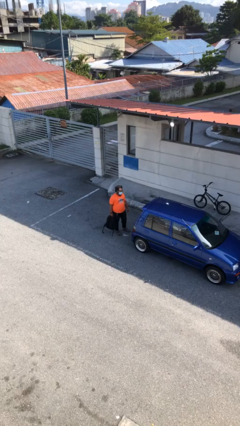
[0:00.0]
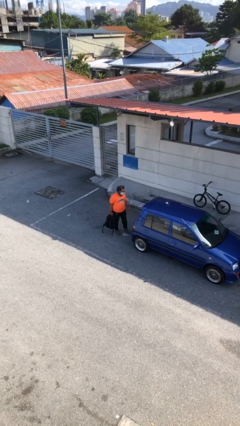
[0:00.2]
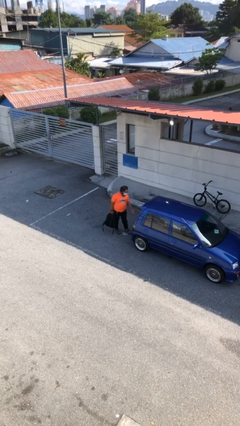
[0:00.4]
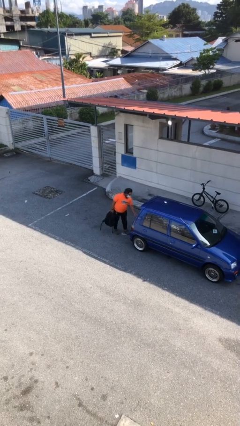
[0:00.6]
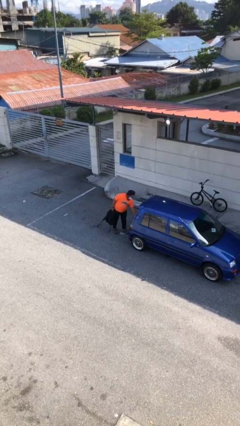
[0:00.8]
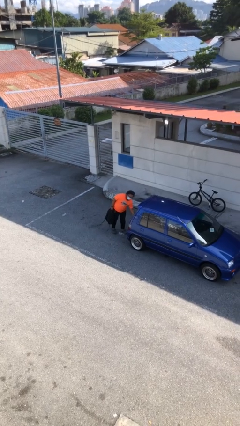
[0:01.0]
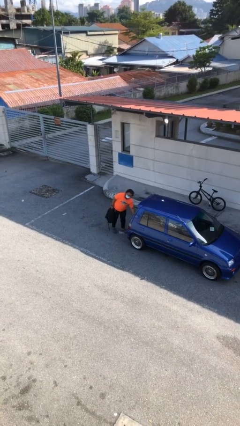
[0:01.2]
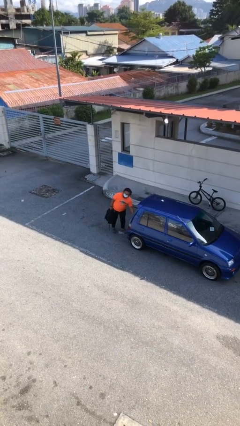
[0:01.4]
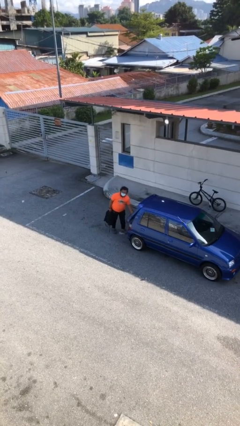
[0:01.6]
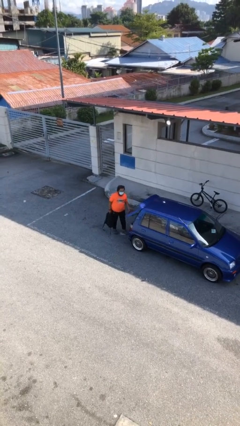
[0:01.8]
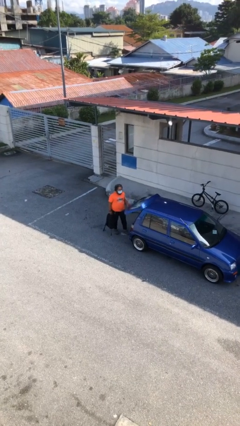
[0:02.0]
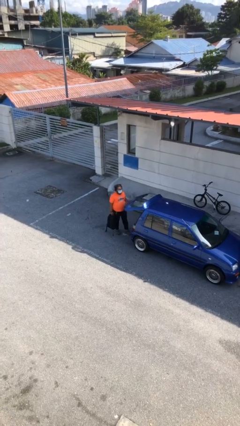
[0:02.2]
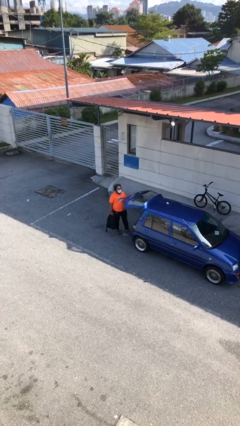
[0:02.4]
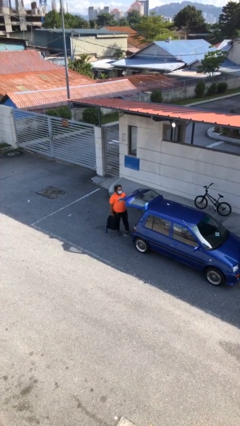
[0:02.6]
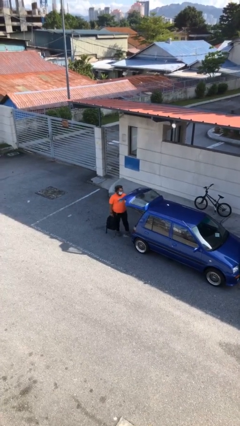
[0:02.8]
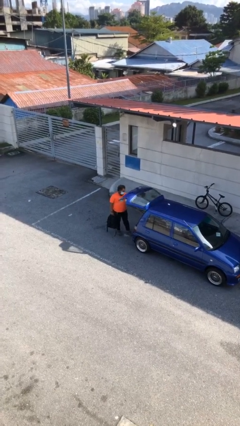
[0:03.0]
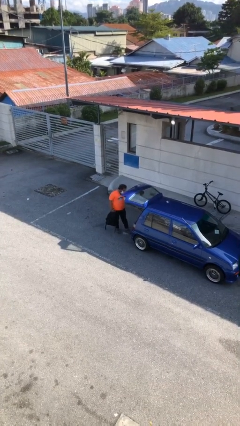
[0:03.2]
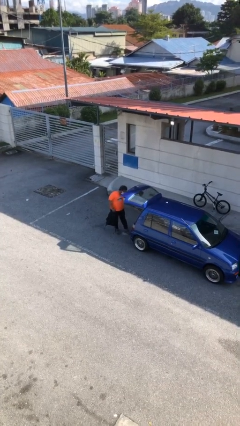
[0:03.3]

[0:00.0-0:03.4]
person opens car trunk

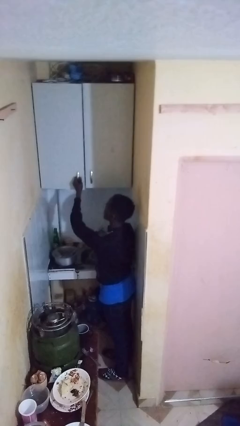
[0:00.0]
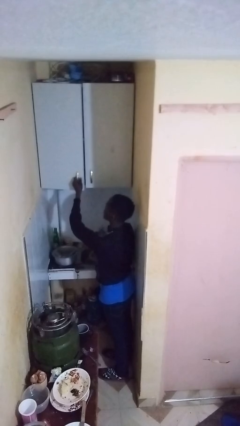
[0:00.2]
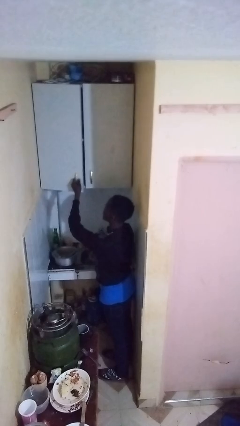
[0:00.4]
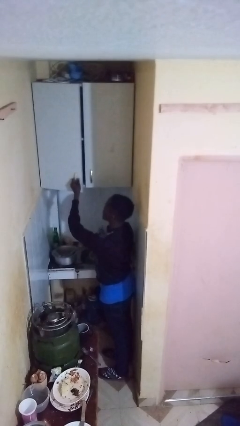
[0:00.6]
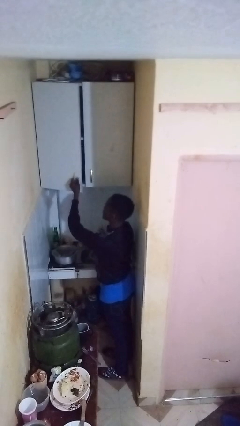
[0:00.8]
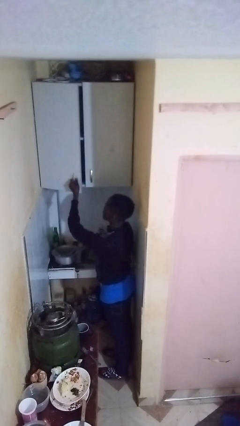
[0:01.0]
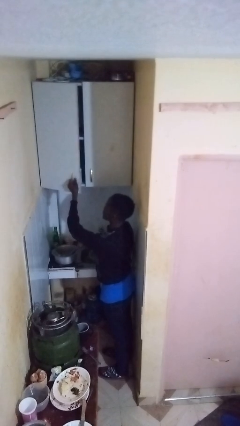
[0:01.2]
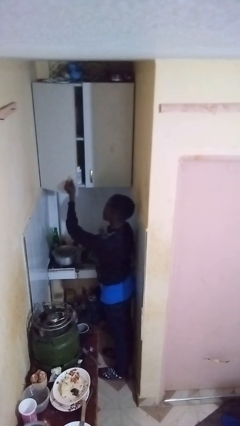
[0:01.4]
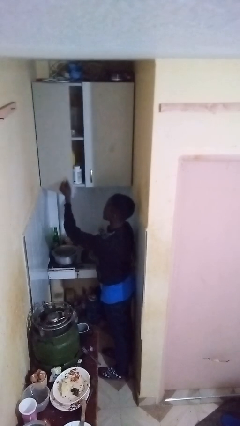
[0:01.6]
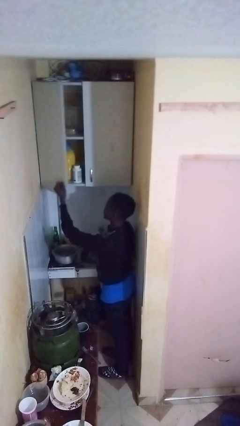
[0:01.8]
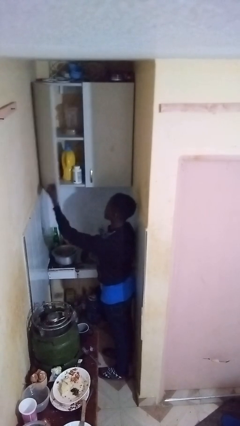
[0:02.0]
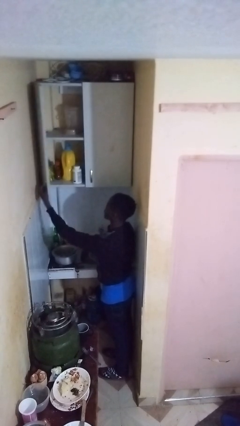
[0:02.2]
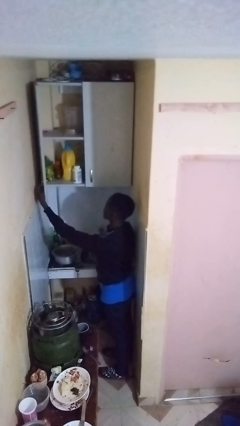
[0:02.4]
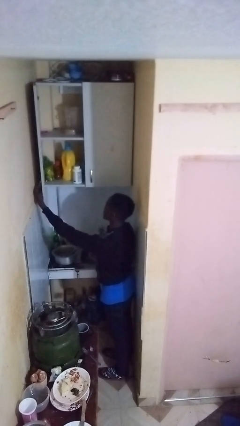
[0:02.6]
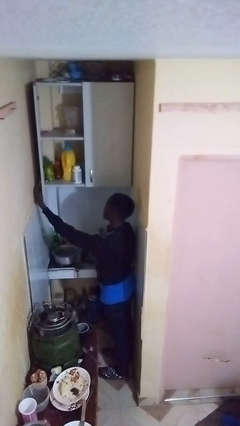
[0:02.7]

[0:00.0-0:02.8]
person opens kitchen drawer

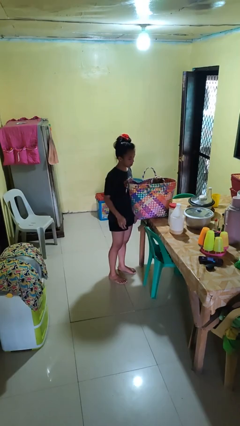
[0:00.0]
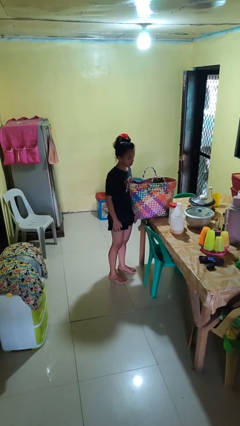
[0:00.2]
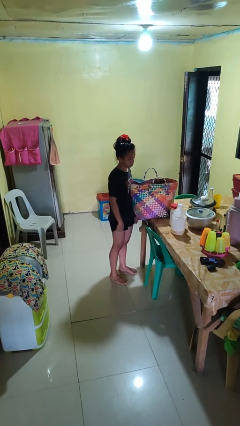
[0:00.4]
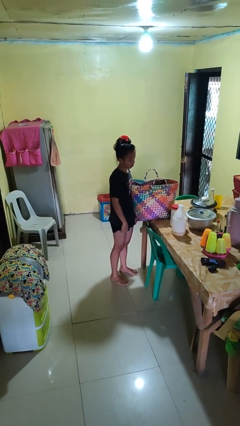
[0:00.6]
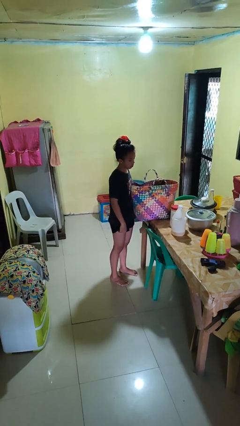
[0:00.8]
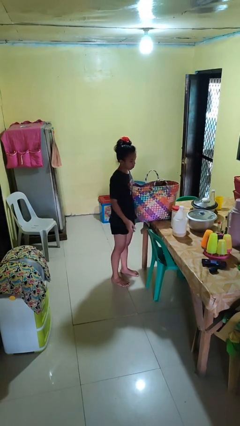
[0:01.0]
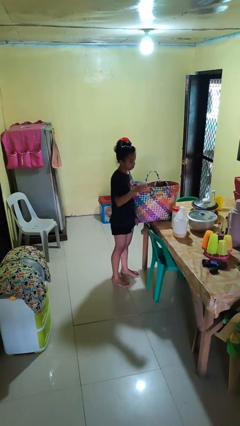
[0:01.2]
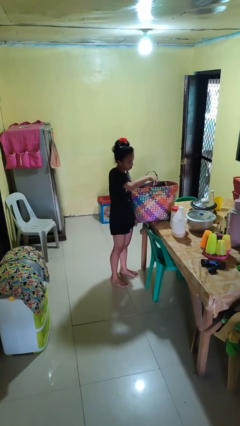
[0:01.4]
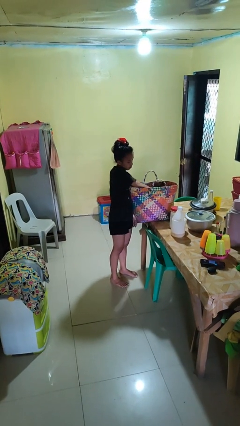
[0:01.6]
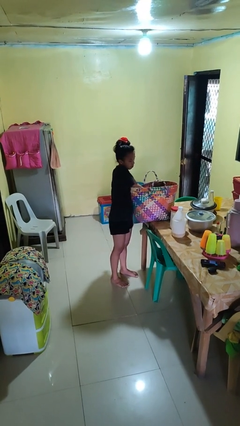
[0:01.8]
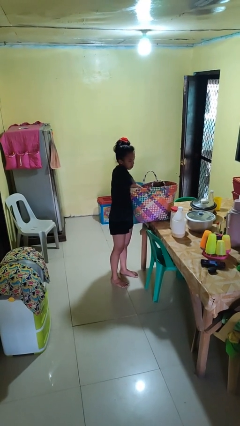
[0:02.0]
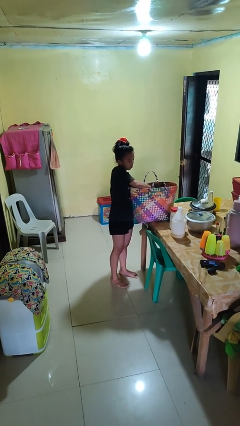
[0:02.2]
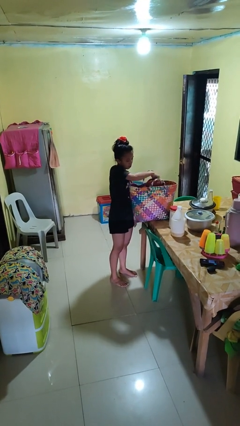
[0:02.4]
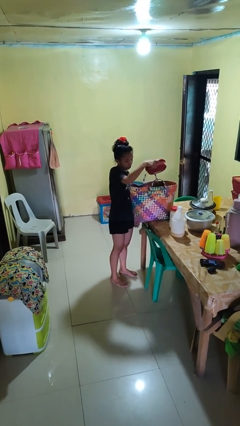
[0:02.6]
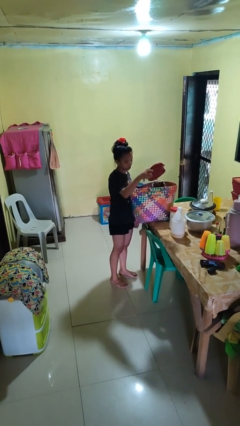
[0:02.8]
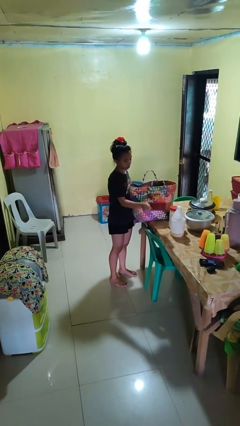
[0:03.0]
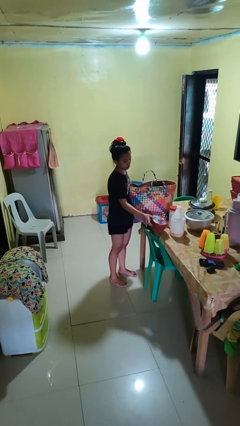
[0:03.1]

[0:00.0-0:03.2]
person takes object from basket

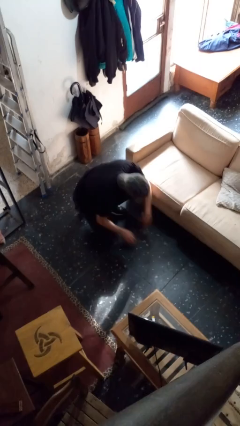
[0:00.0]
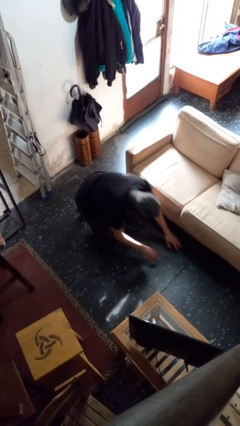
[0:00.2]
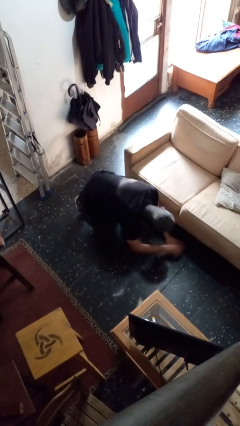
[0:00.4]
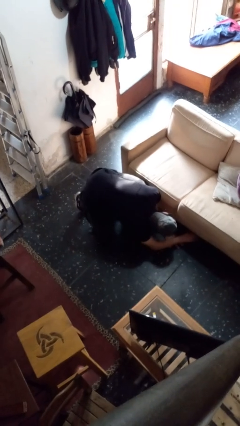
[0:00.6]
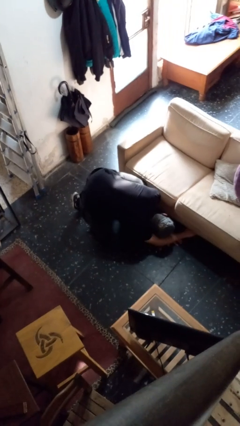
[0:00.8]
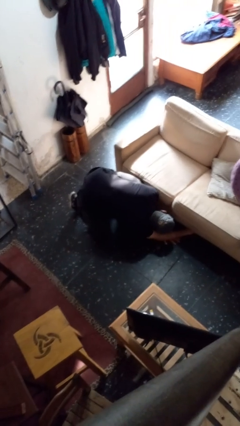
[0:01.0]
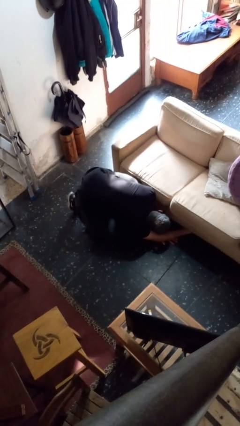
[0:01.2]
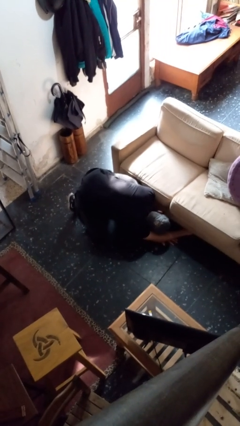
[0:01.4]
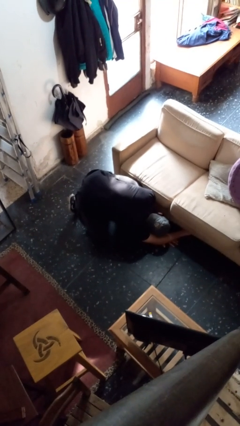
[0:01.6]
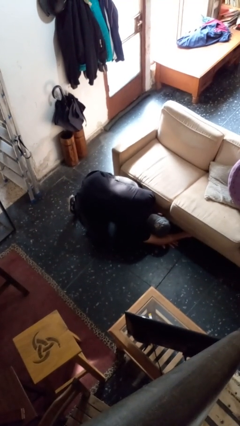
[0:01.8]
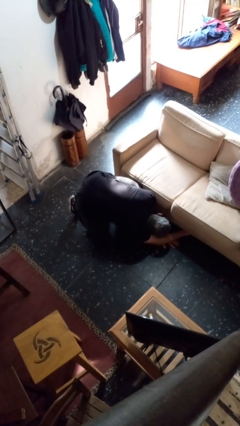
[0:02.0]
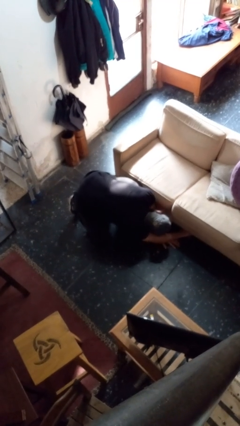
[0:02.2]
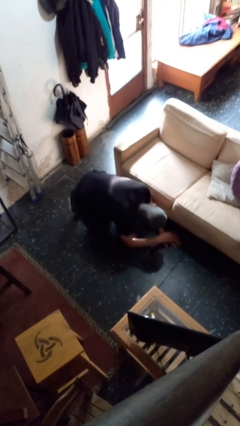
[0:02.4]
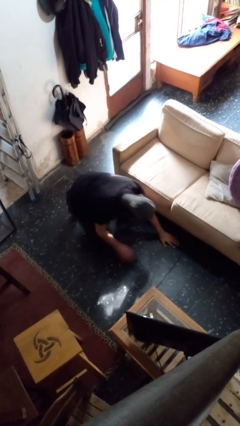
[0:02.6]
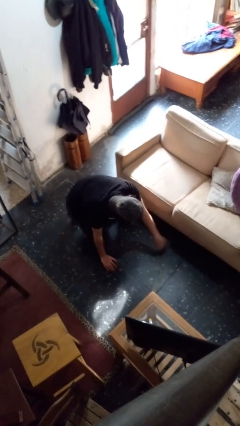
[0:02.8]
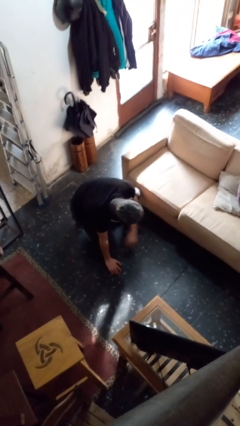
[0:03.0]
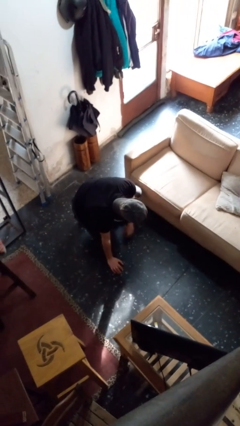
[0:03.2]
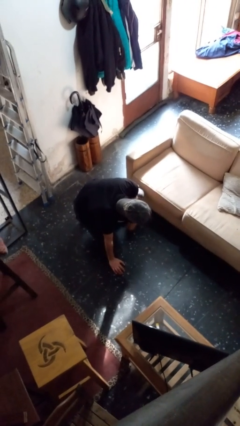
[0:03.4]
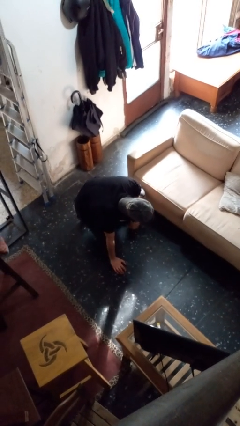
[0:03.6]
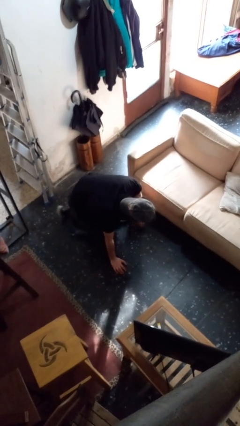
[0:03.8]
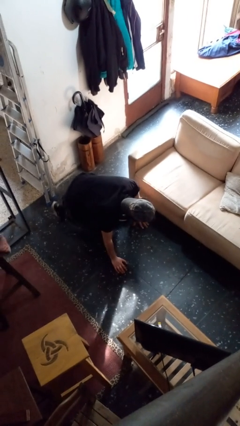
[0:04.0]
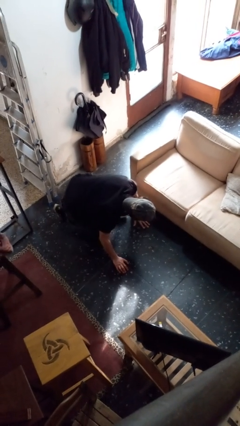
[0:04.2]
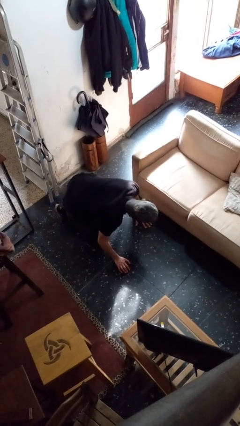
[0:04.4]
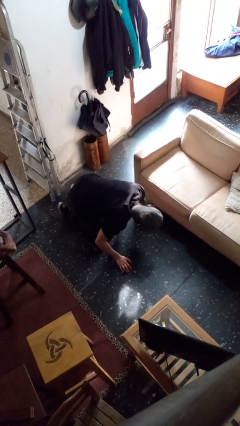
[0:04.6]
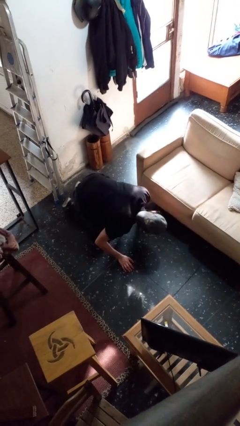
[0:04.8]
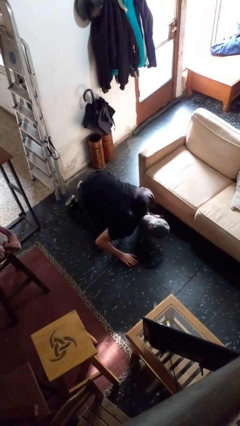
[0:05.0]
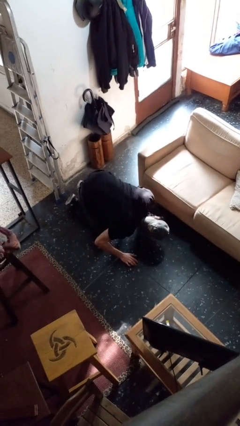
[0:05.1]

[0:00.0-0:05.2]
person searches under couch

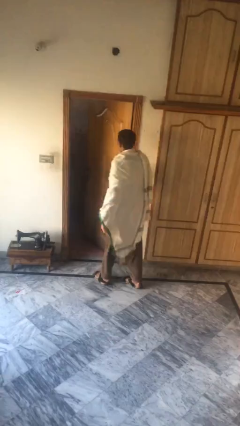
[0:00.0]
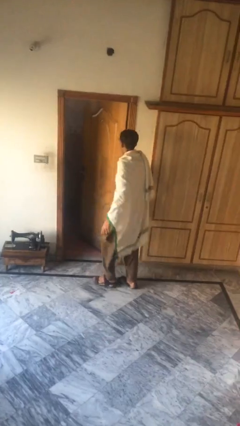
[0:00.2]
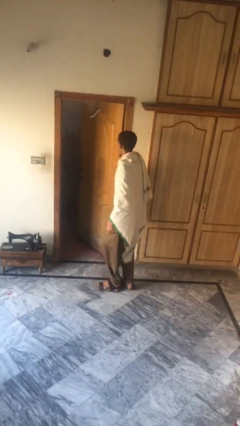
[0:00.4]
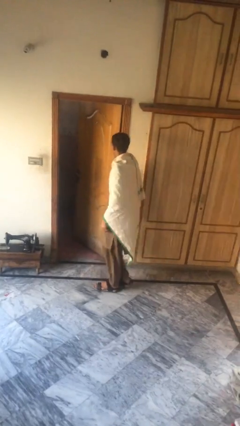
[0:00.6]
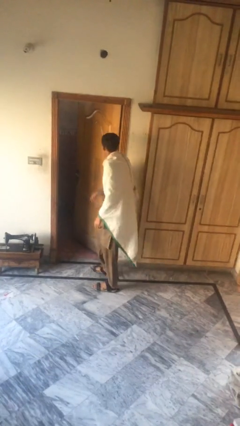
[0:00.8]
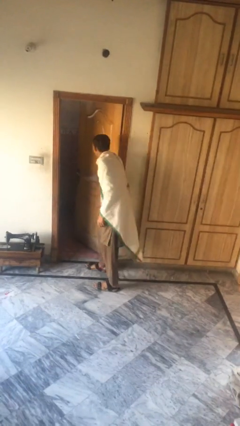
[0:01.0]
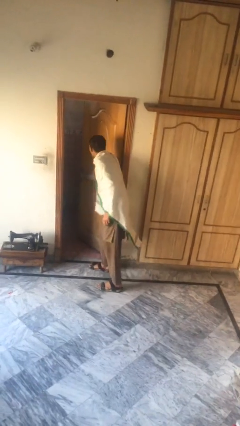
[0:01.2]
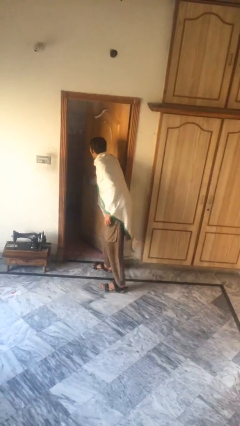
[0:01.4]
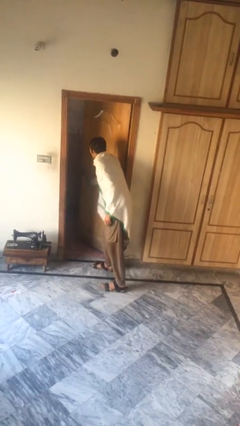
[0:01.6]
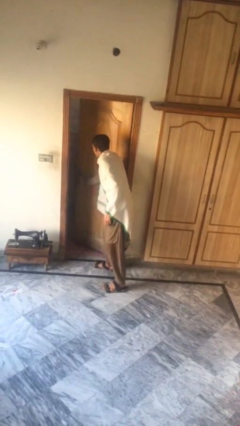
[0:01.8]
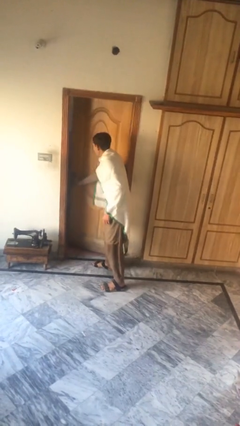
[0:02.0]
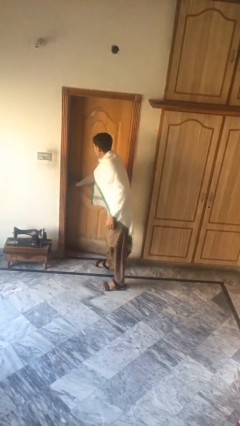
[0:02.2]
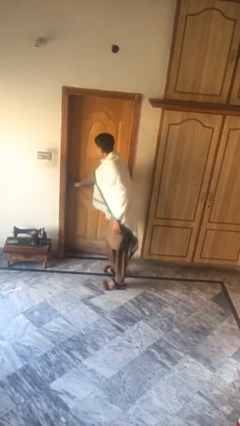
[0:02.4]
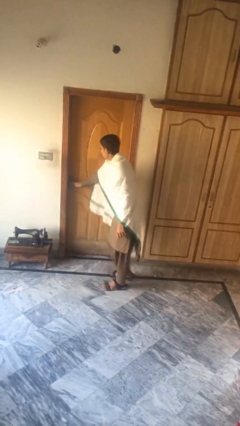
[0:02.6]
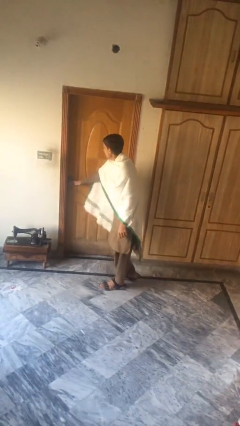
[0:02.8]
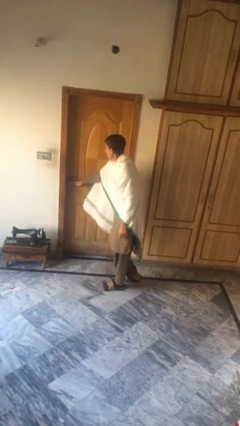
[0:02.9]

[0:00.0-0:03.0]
person closes facility door
